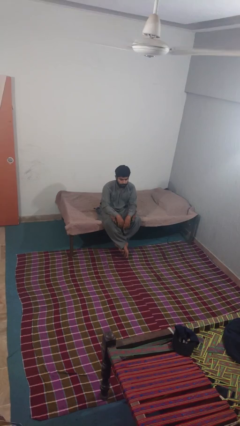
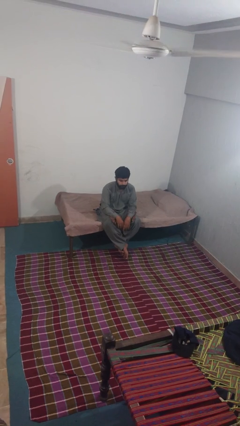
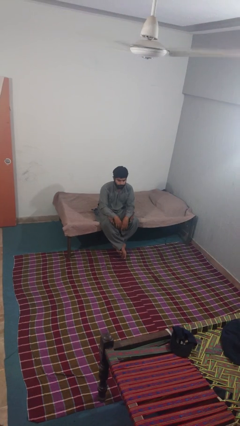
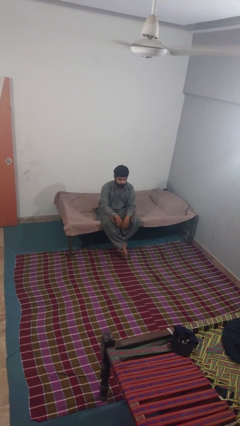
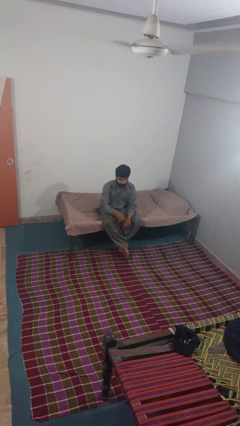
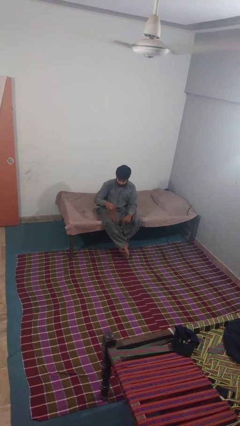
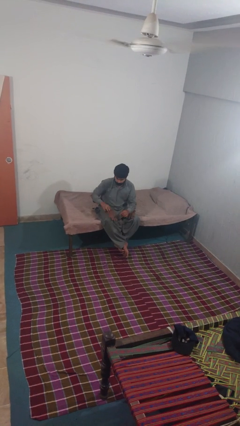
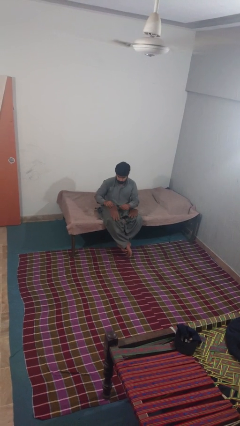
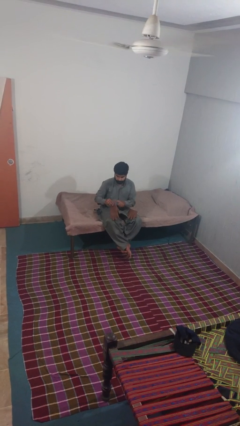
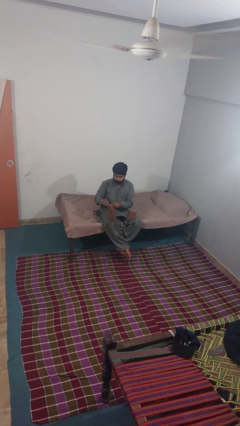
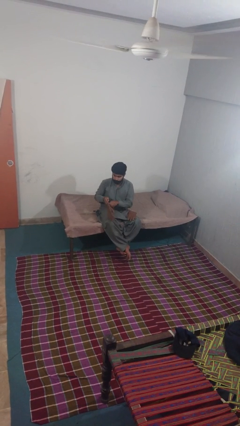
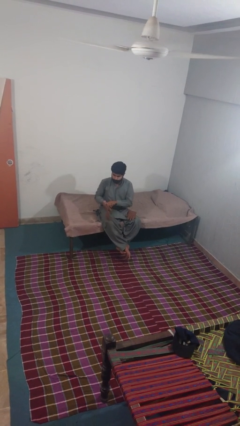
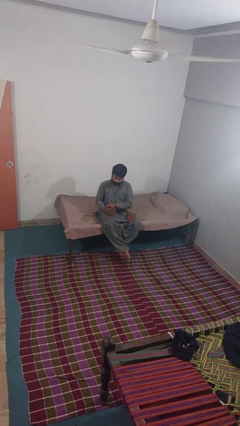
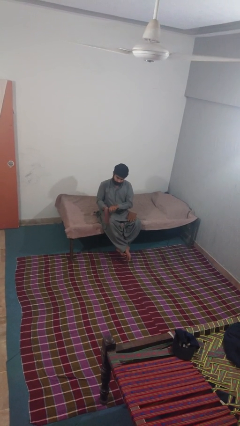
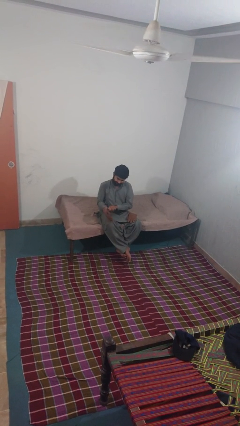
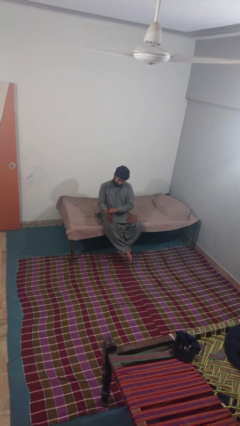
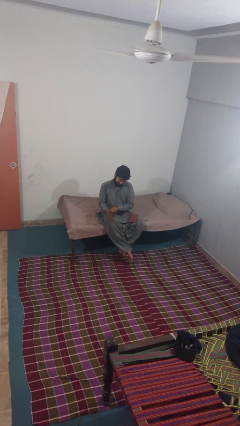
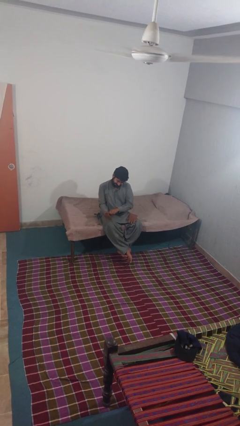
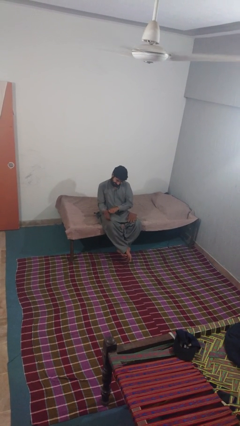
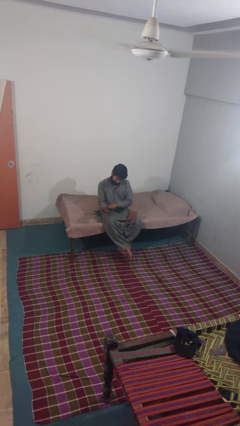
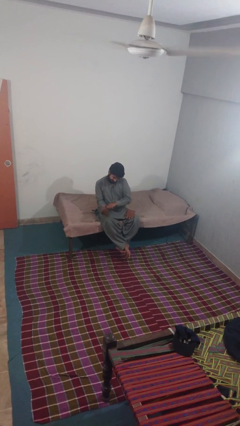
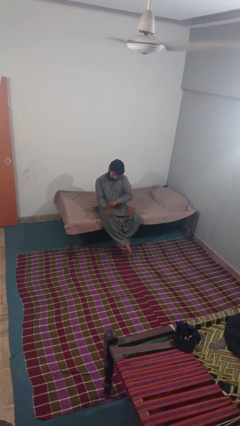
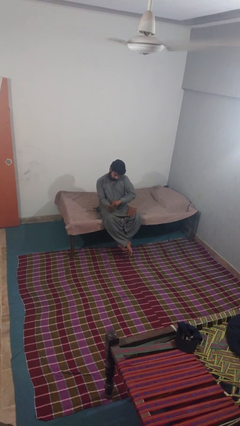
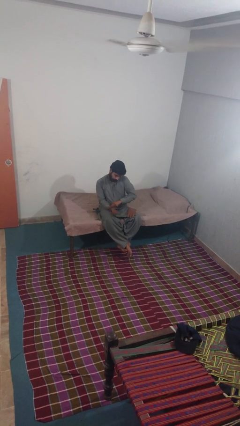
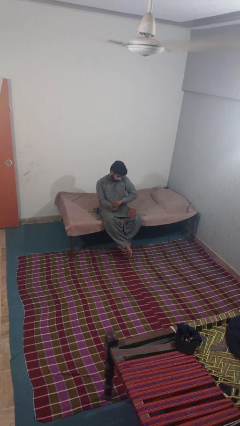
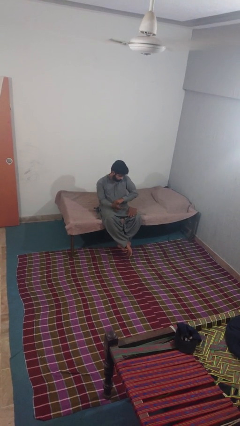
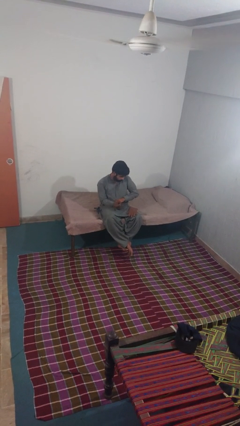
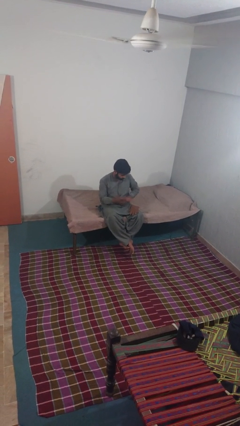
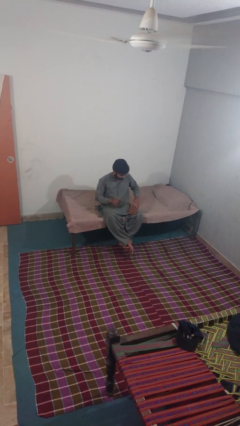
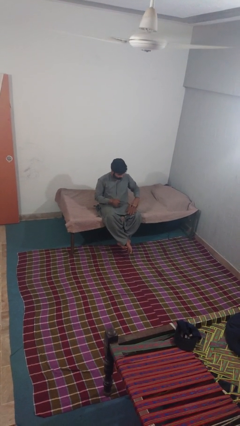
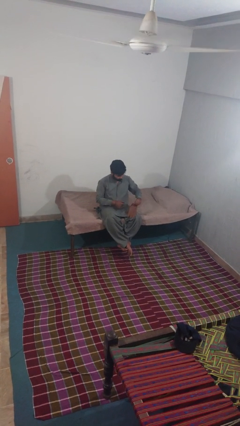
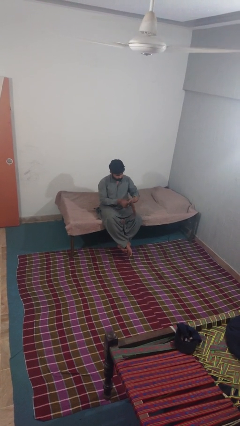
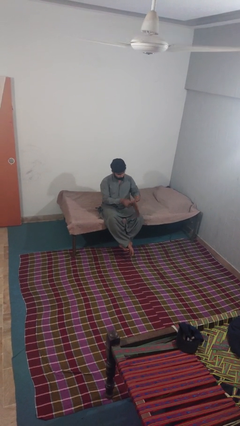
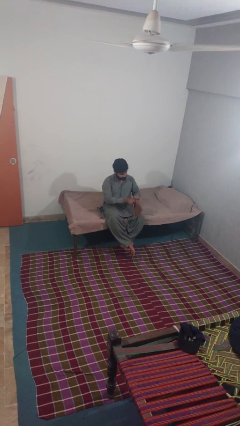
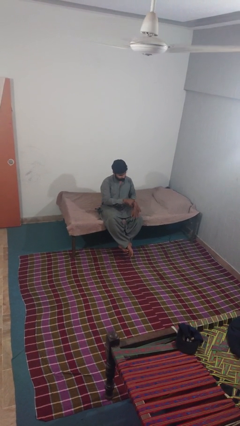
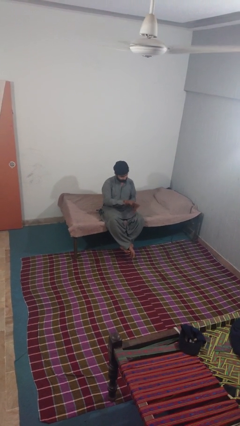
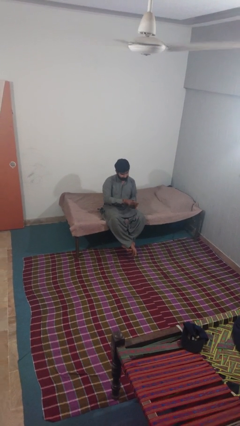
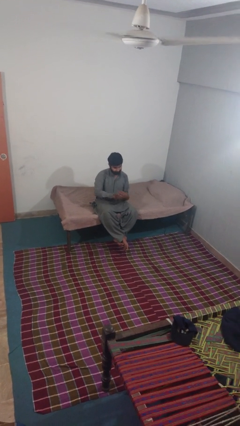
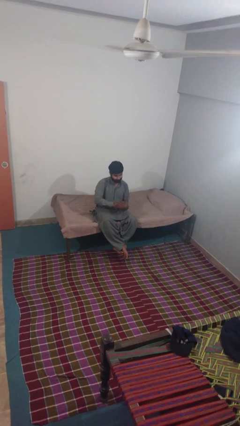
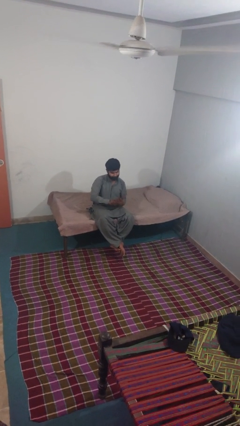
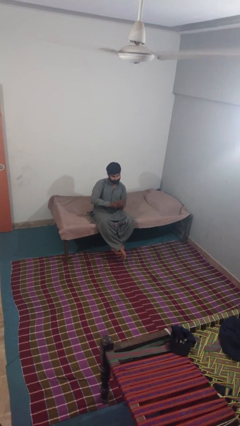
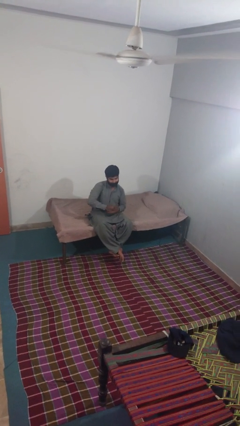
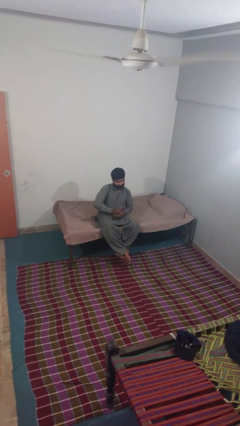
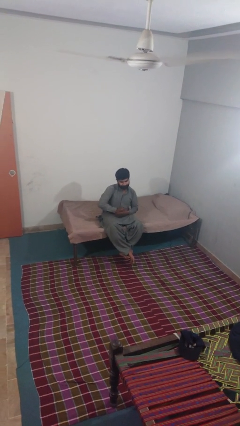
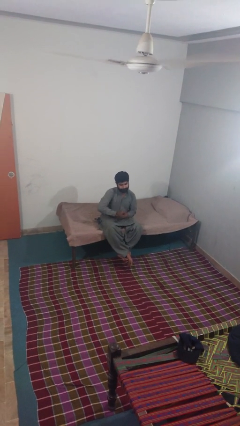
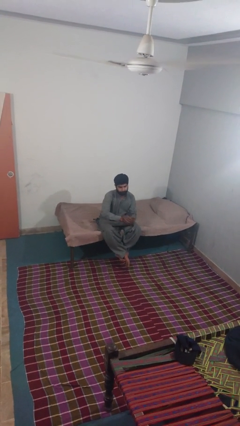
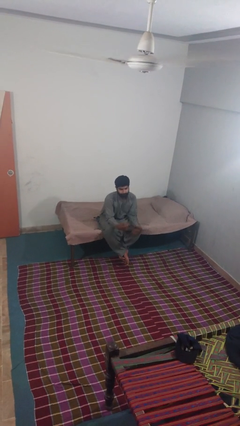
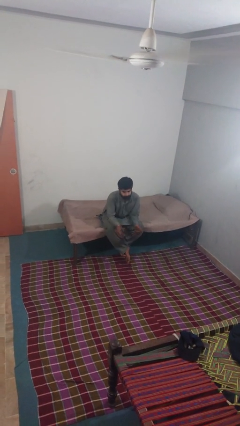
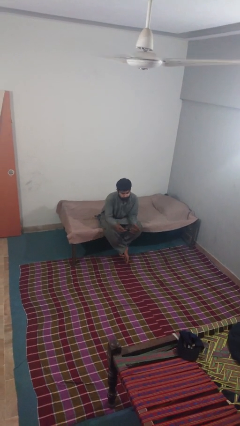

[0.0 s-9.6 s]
person puts on gloves

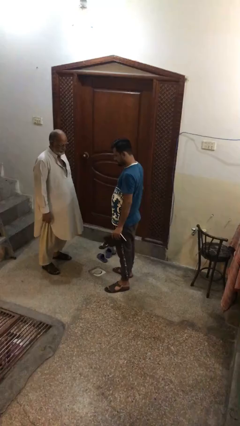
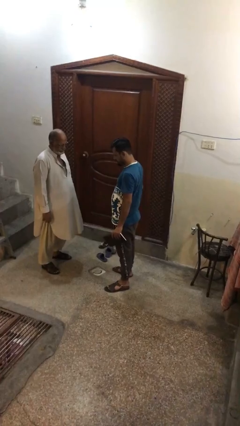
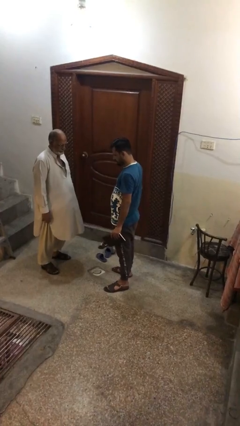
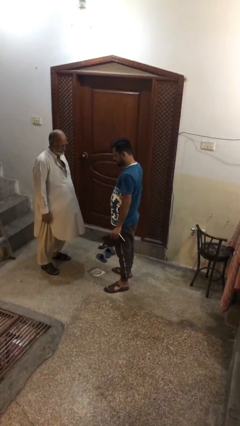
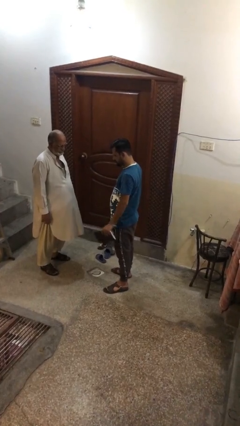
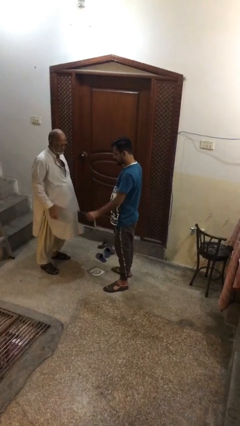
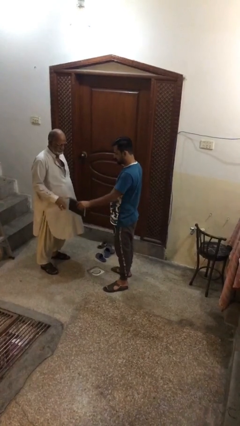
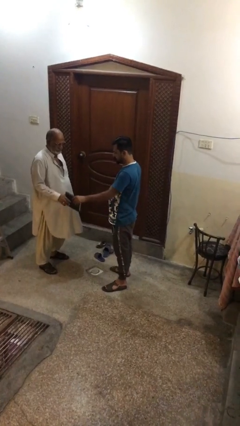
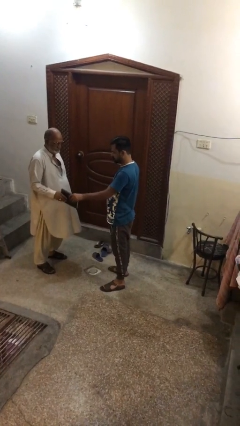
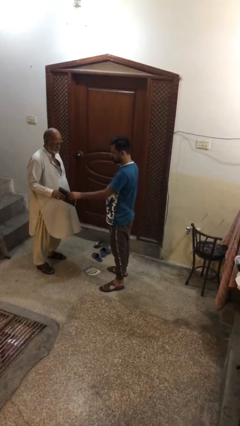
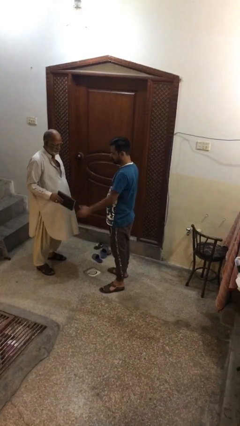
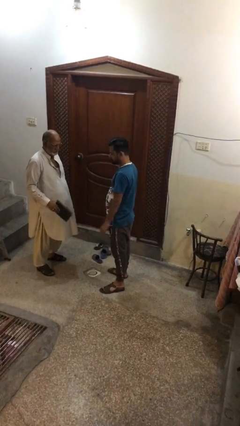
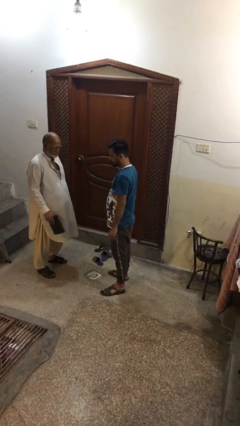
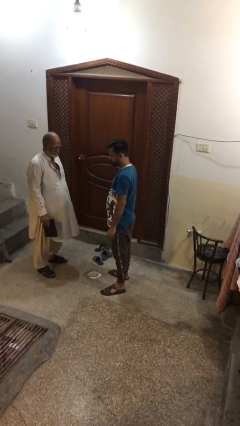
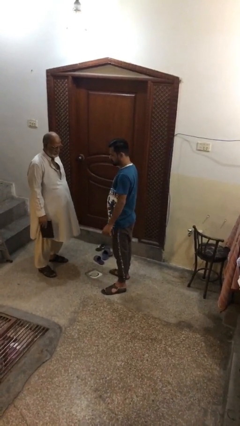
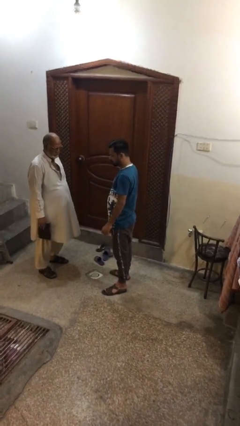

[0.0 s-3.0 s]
person transfers object to person

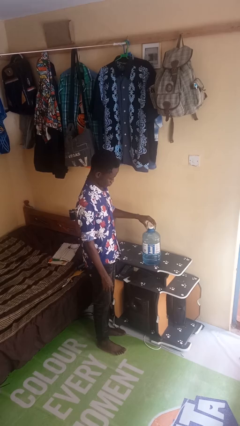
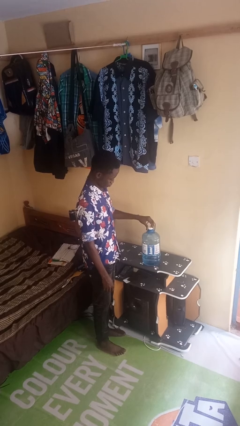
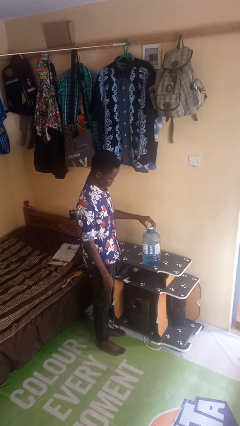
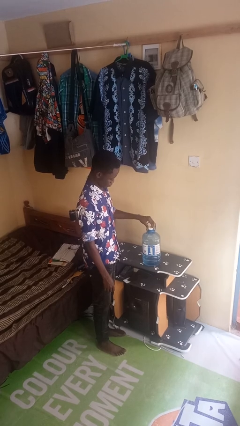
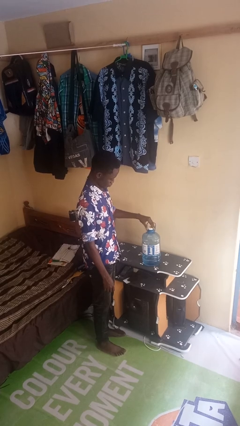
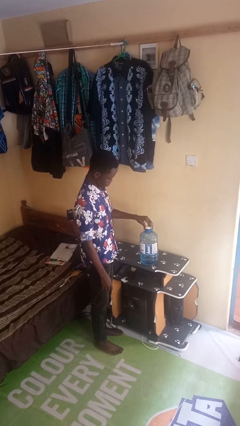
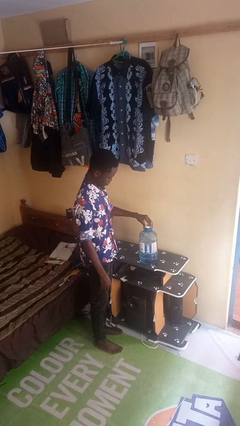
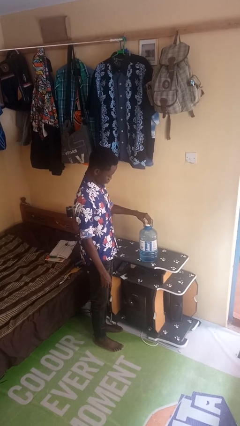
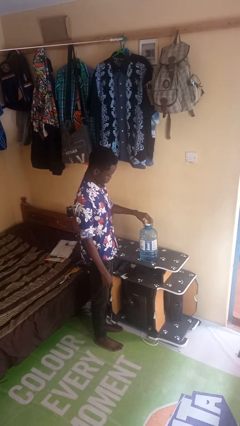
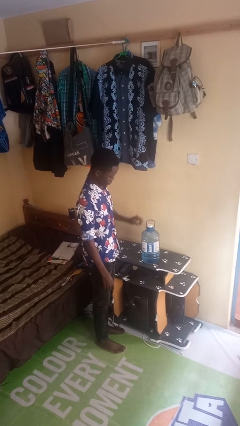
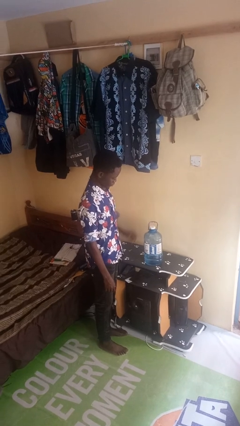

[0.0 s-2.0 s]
person screws lid to bottle

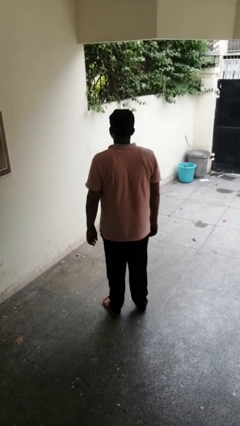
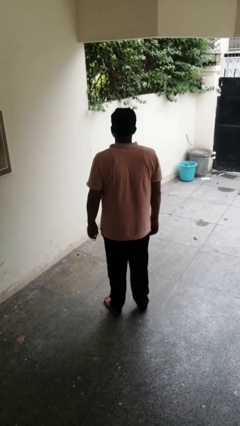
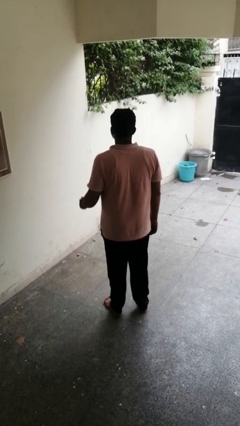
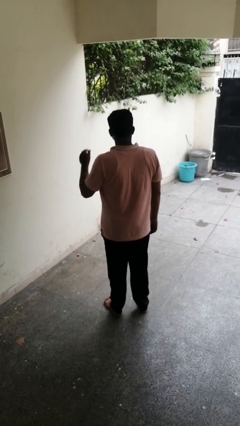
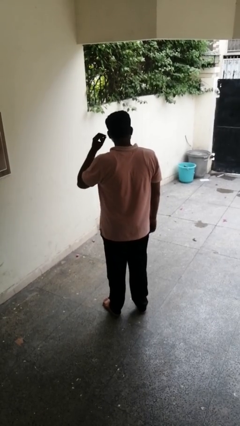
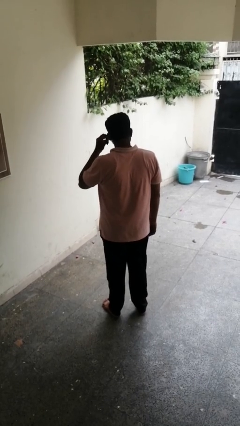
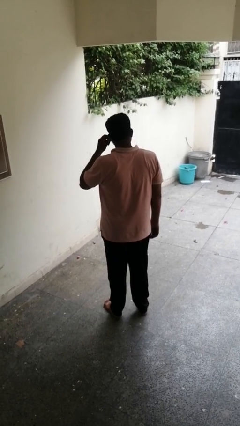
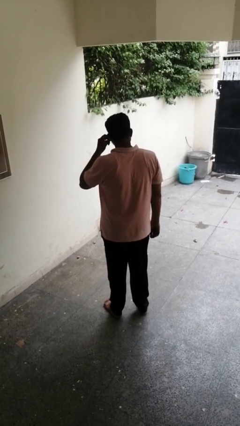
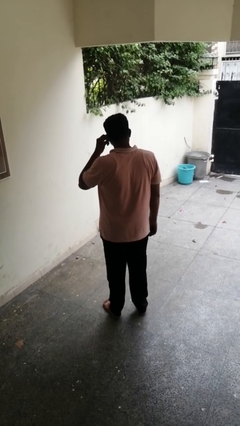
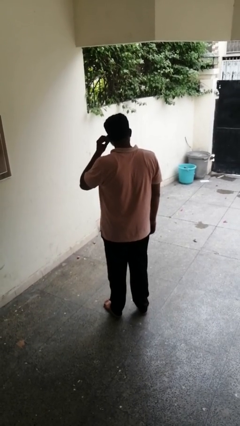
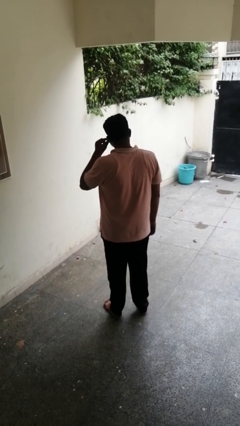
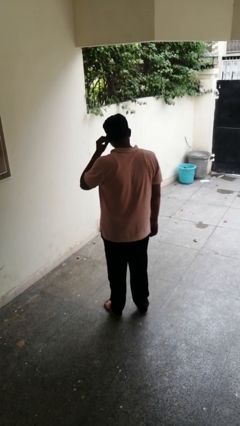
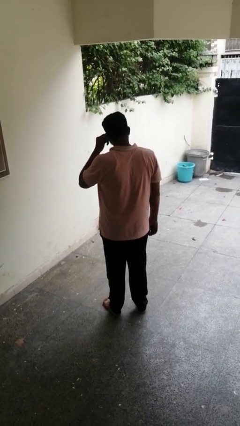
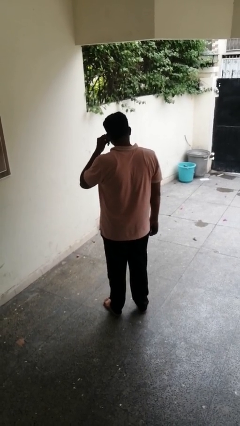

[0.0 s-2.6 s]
person touches earlobe
